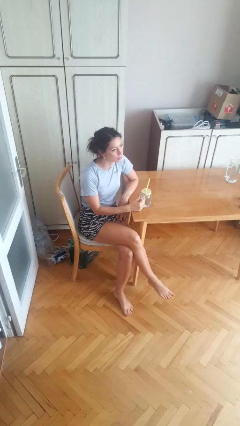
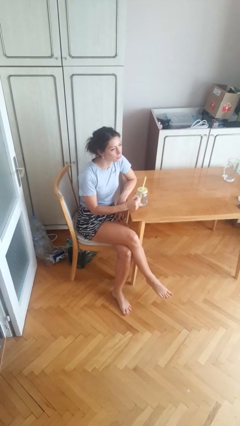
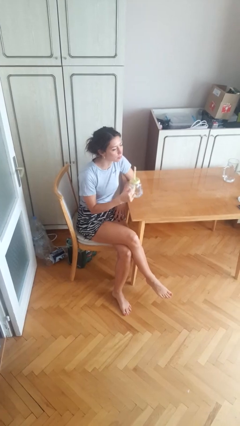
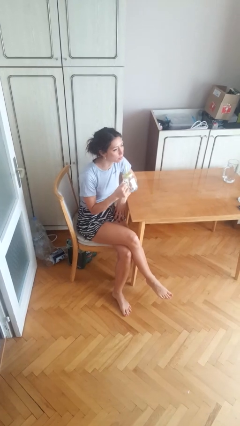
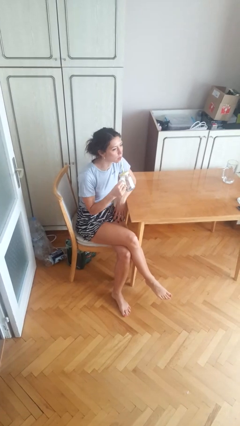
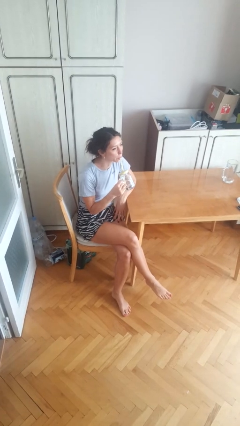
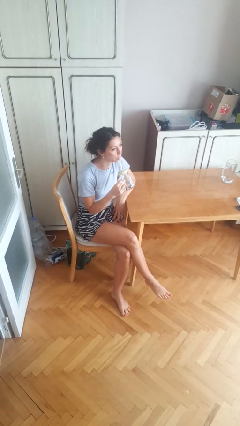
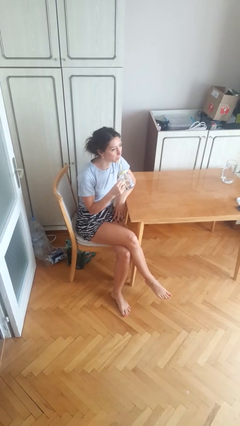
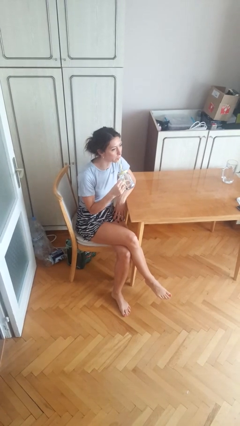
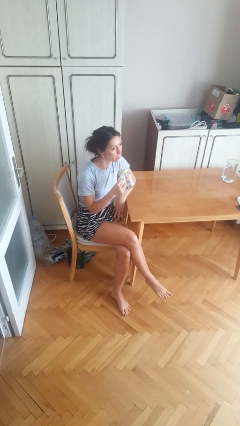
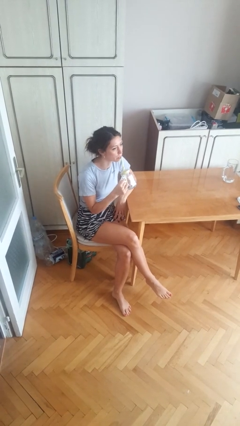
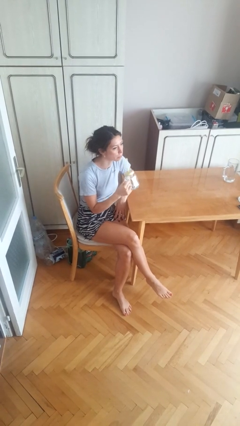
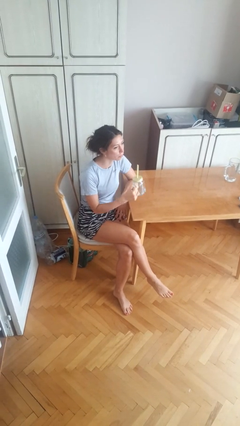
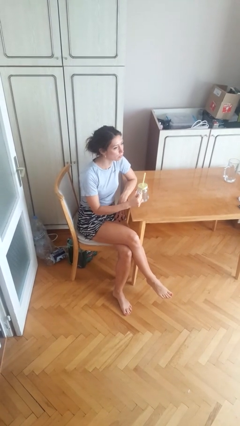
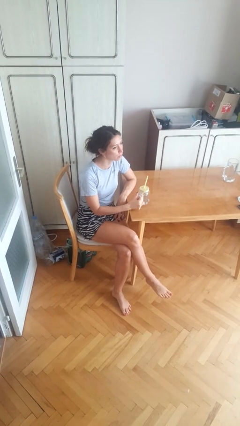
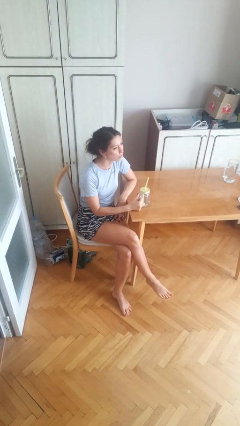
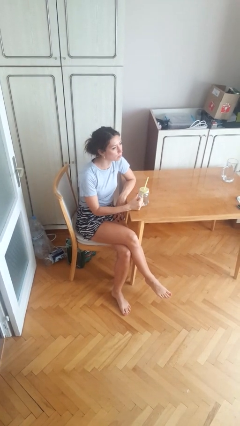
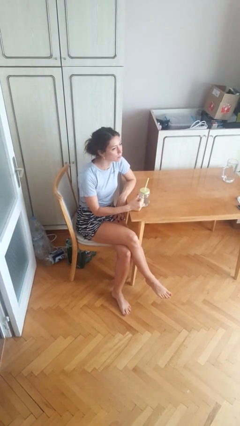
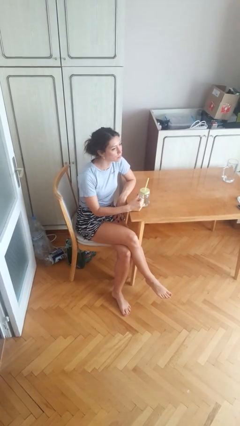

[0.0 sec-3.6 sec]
person drinks from straw
